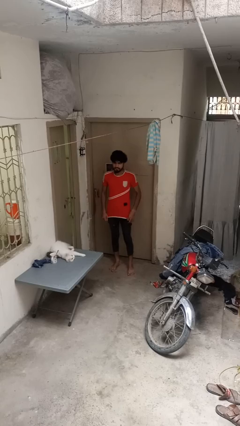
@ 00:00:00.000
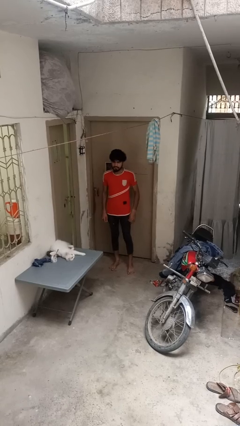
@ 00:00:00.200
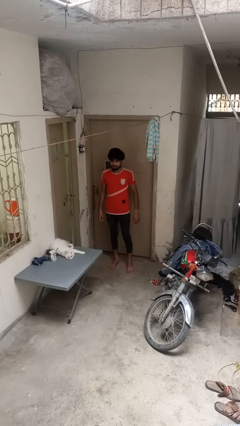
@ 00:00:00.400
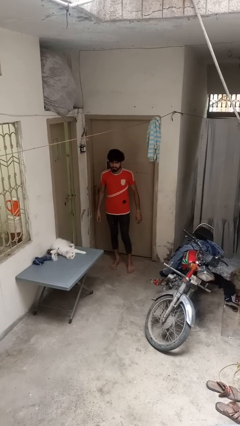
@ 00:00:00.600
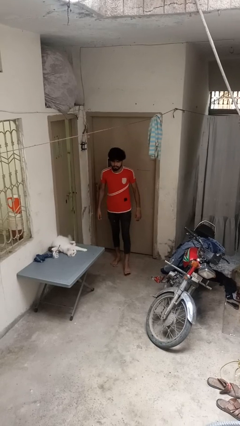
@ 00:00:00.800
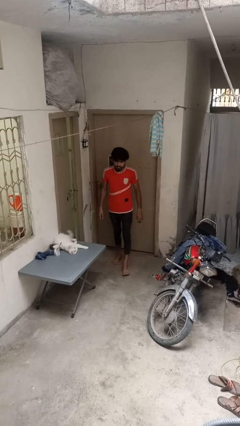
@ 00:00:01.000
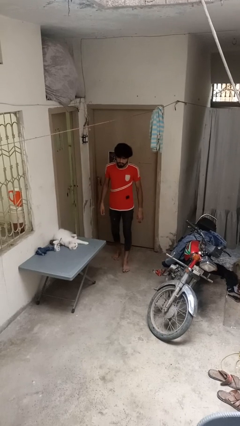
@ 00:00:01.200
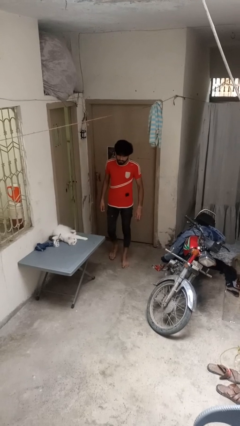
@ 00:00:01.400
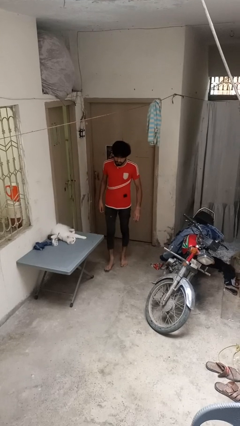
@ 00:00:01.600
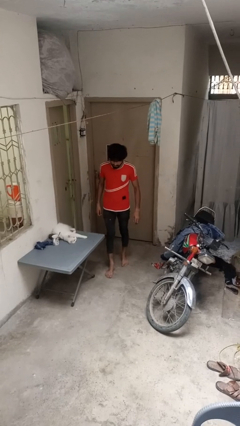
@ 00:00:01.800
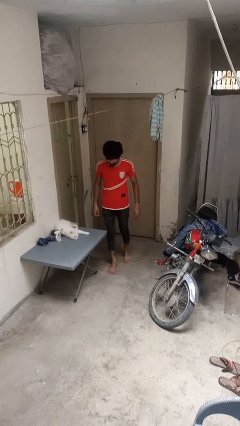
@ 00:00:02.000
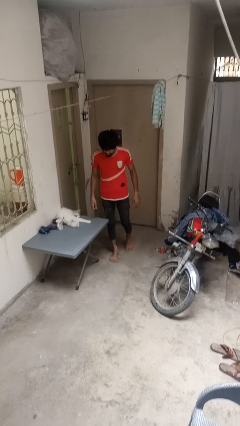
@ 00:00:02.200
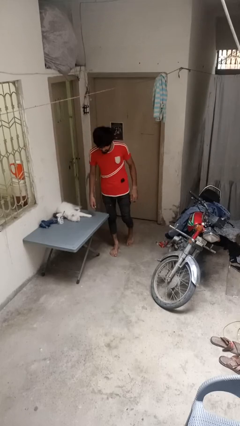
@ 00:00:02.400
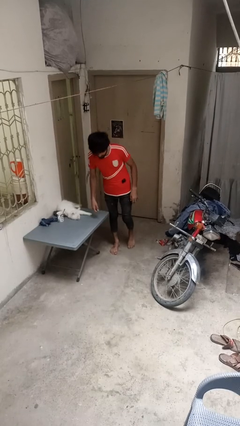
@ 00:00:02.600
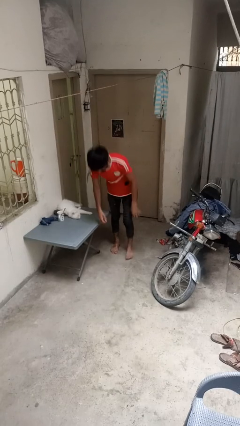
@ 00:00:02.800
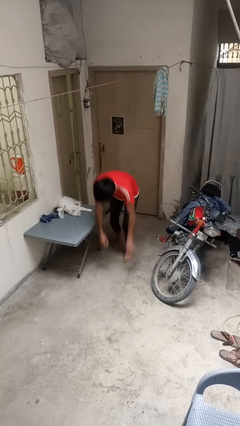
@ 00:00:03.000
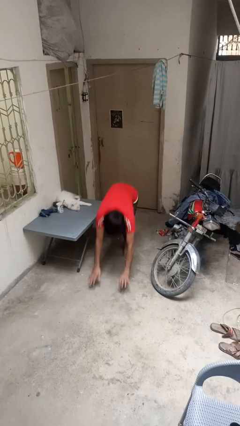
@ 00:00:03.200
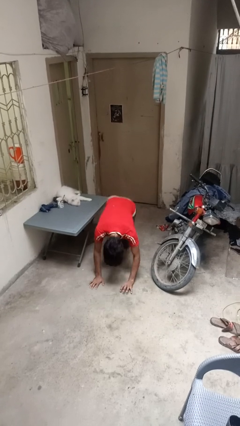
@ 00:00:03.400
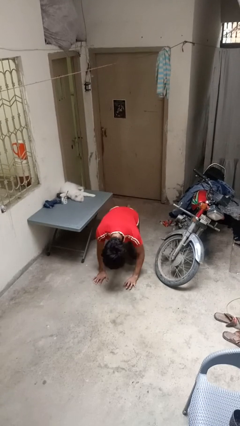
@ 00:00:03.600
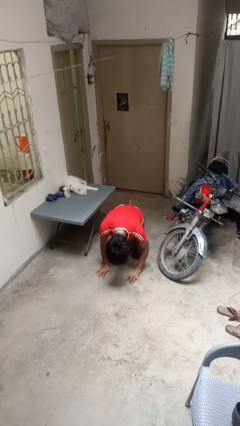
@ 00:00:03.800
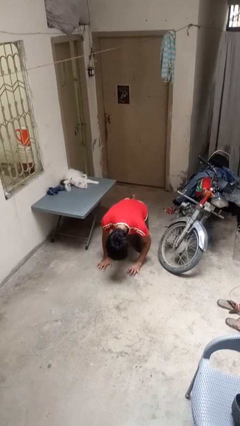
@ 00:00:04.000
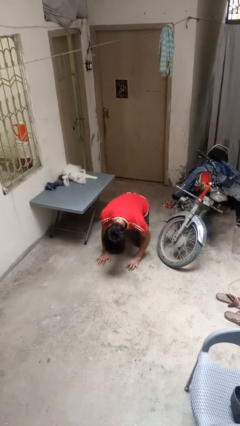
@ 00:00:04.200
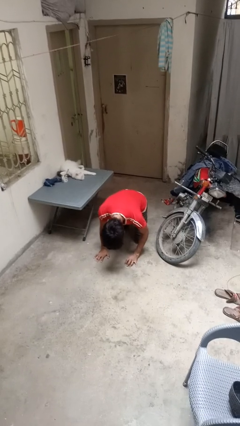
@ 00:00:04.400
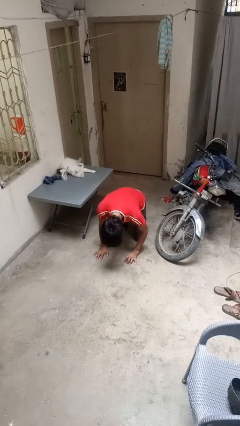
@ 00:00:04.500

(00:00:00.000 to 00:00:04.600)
person trips on object on floor

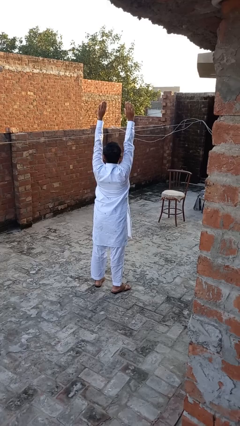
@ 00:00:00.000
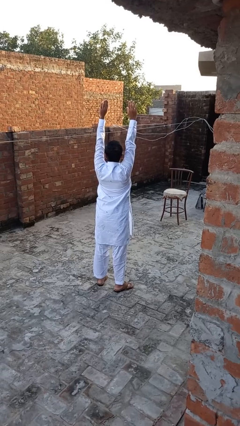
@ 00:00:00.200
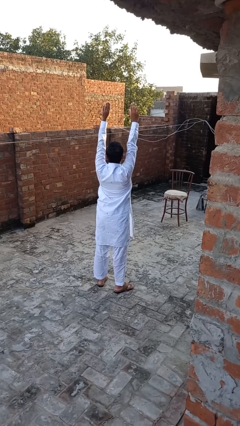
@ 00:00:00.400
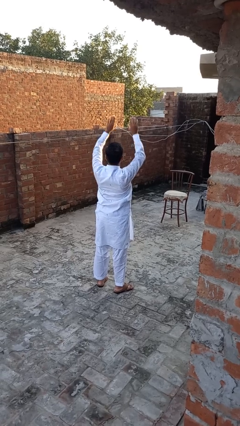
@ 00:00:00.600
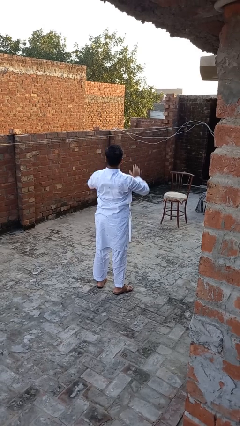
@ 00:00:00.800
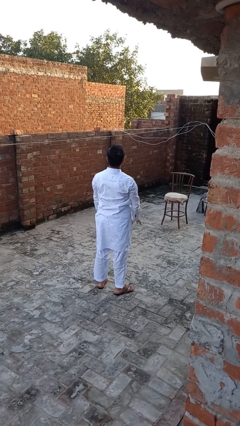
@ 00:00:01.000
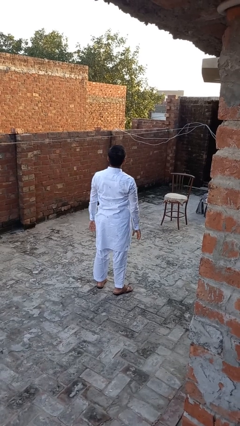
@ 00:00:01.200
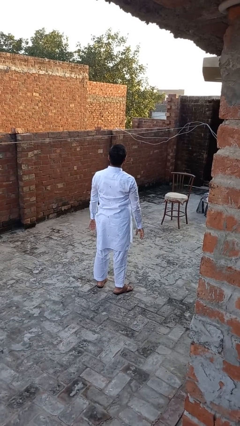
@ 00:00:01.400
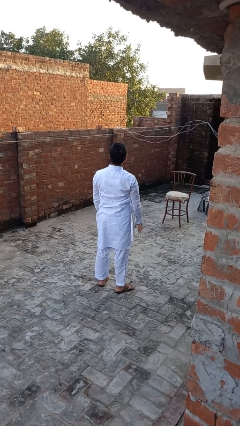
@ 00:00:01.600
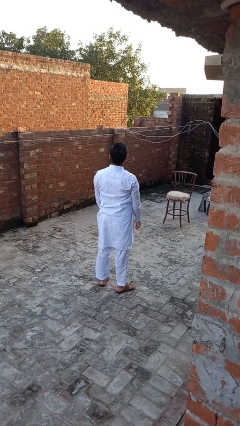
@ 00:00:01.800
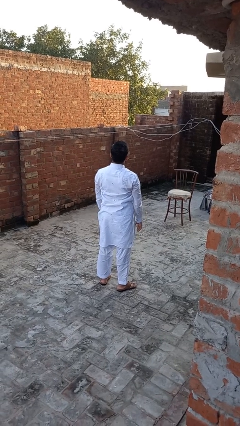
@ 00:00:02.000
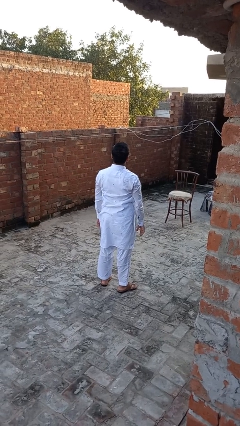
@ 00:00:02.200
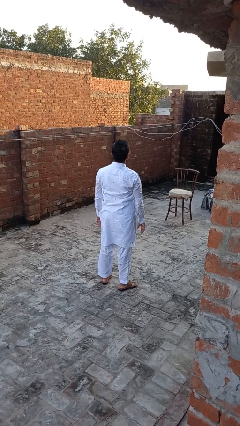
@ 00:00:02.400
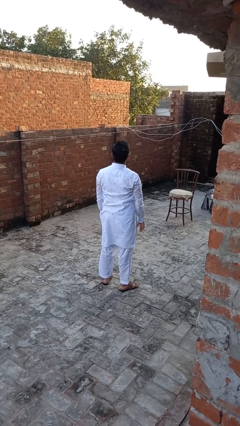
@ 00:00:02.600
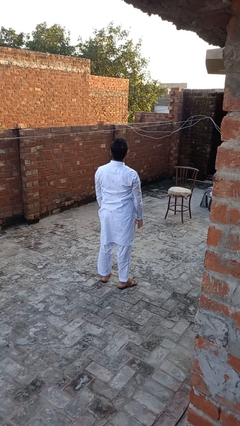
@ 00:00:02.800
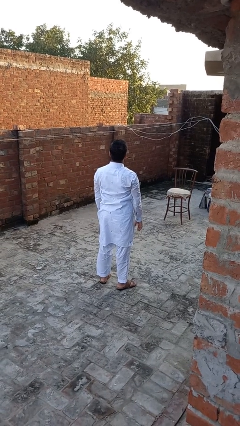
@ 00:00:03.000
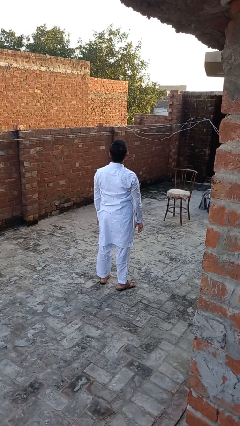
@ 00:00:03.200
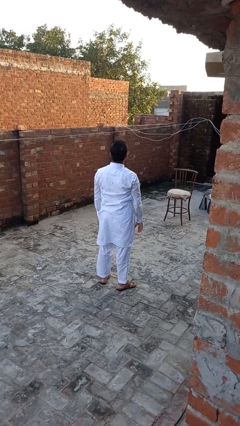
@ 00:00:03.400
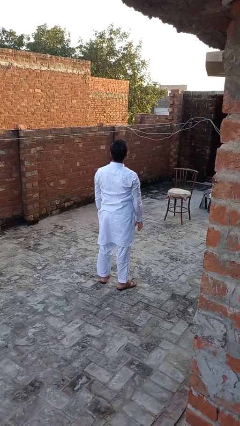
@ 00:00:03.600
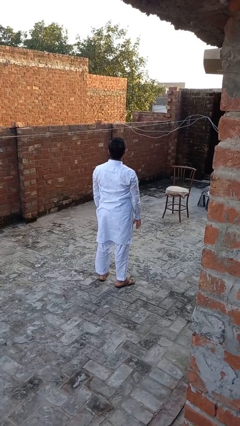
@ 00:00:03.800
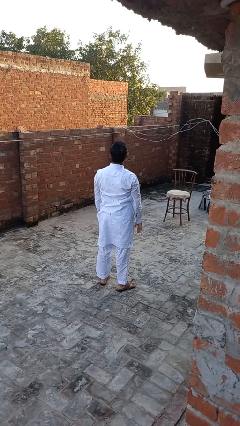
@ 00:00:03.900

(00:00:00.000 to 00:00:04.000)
person gestures swipe down

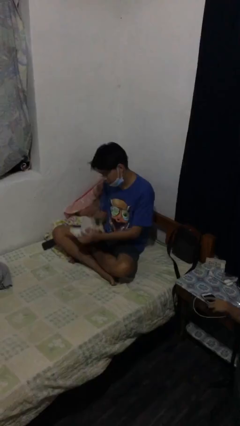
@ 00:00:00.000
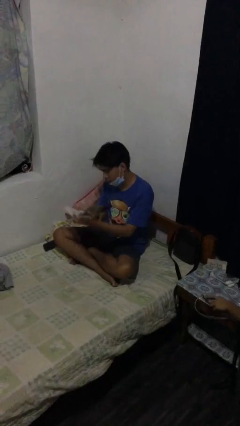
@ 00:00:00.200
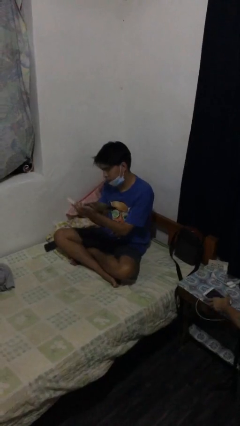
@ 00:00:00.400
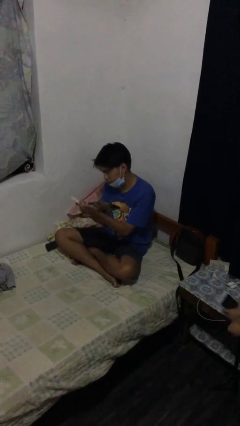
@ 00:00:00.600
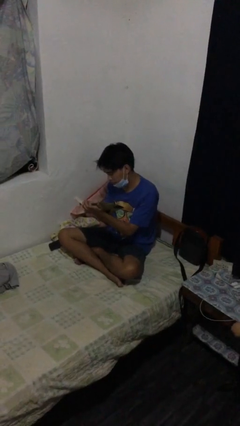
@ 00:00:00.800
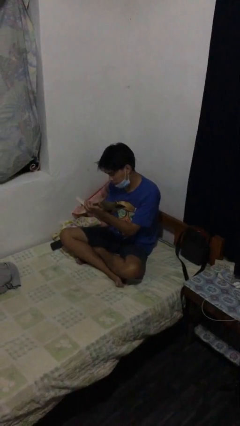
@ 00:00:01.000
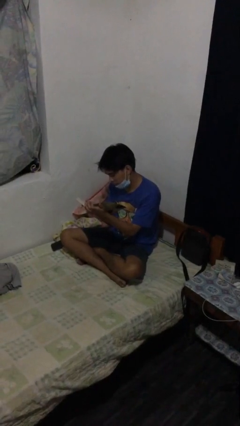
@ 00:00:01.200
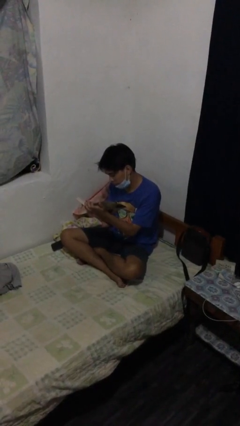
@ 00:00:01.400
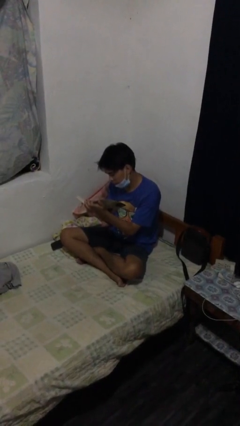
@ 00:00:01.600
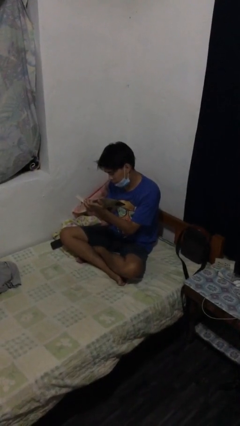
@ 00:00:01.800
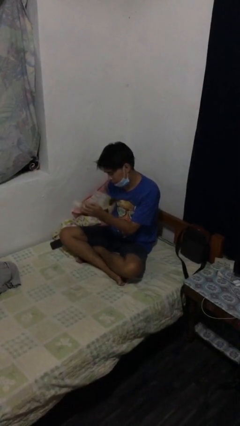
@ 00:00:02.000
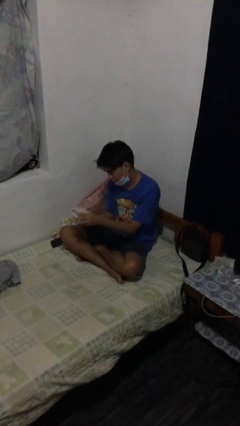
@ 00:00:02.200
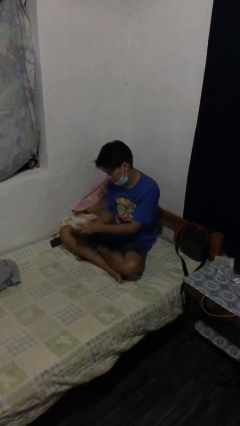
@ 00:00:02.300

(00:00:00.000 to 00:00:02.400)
person reads document

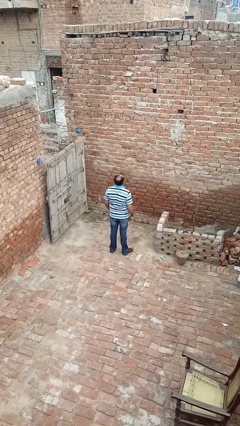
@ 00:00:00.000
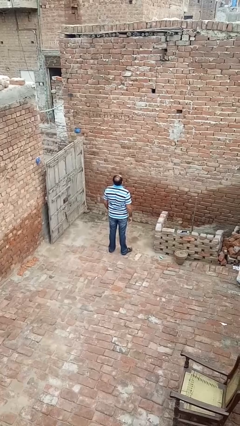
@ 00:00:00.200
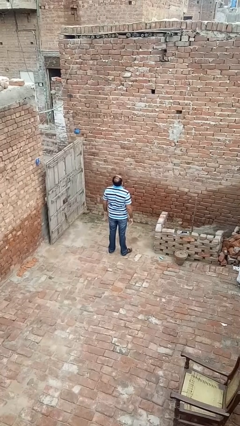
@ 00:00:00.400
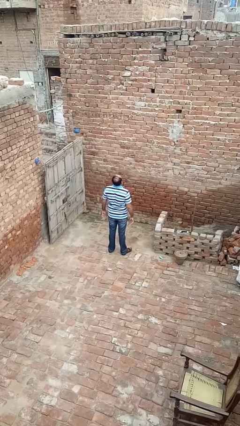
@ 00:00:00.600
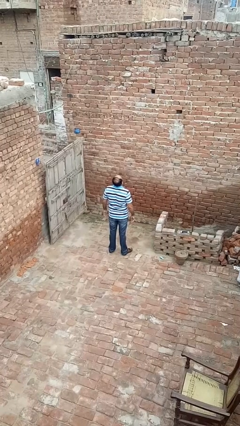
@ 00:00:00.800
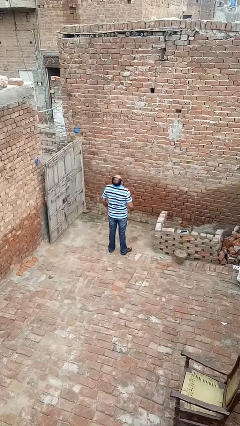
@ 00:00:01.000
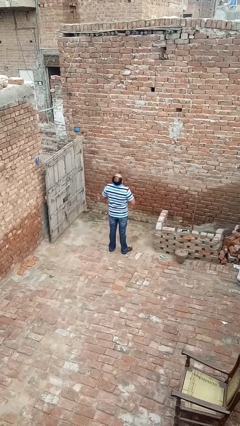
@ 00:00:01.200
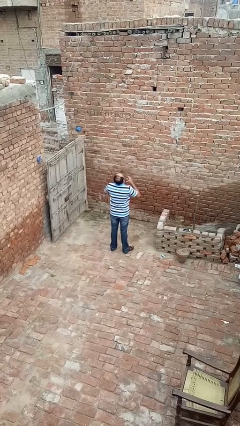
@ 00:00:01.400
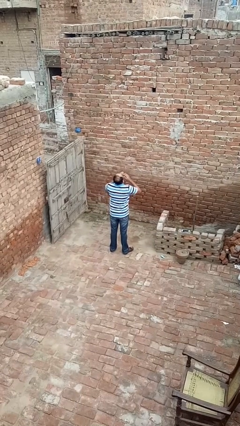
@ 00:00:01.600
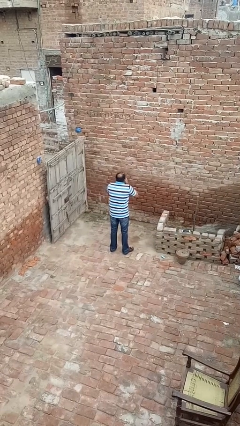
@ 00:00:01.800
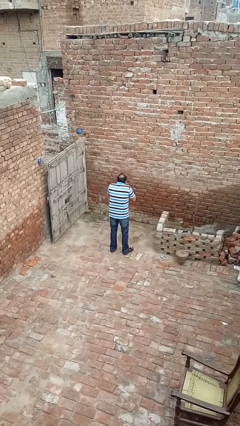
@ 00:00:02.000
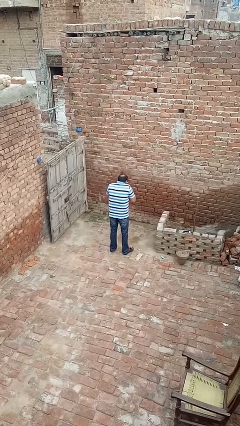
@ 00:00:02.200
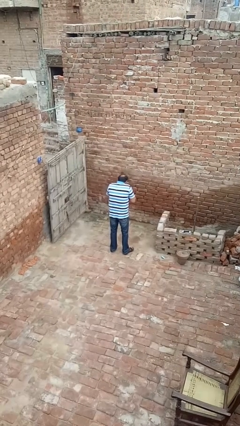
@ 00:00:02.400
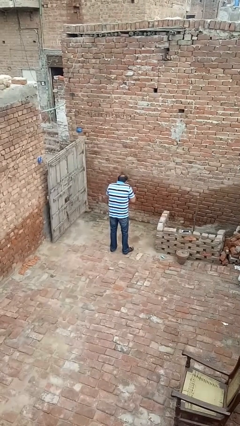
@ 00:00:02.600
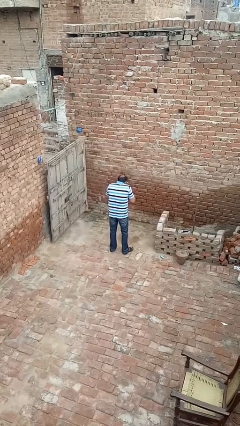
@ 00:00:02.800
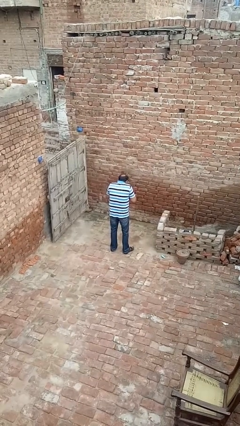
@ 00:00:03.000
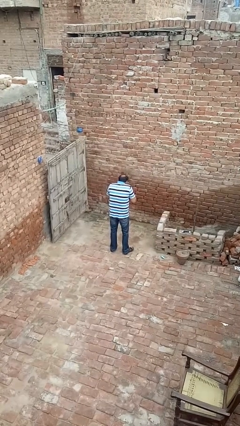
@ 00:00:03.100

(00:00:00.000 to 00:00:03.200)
person sneezes into hand

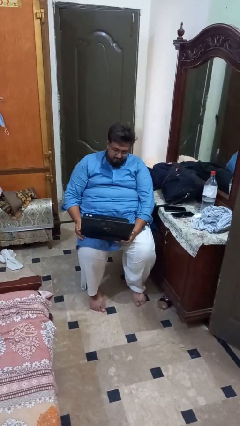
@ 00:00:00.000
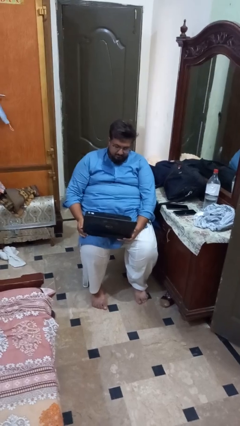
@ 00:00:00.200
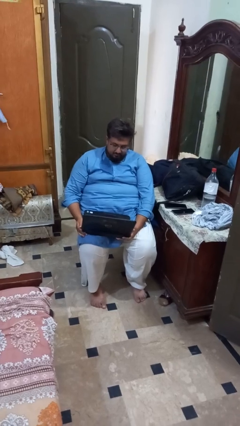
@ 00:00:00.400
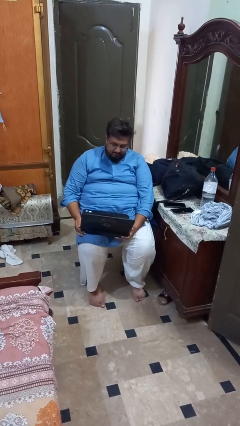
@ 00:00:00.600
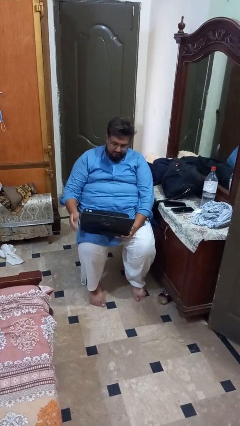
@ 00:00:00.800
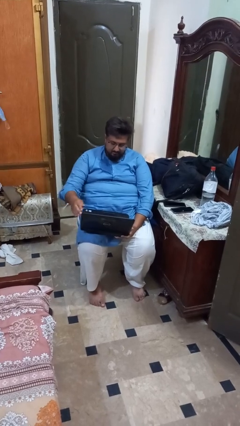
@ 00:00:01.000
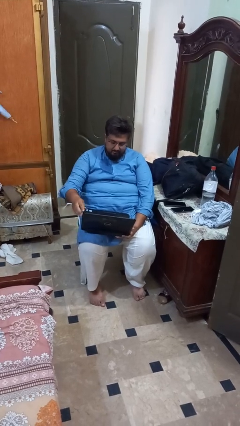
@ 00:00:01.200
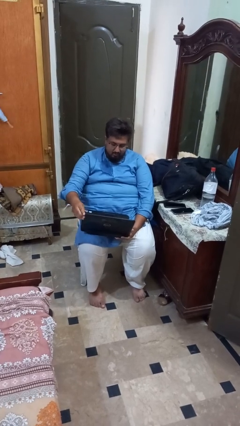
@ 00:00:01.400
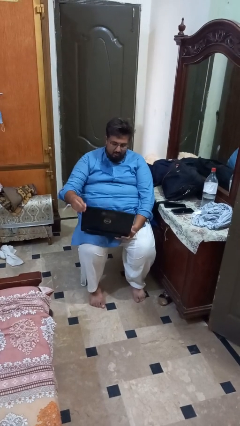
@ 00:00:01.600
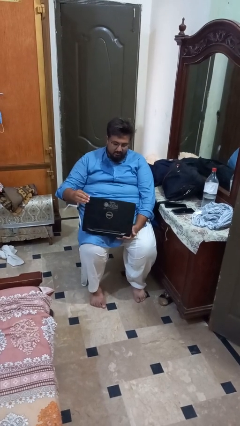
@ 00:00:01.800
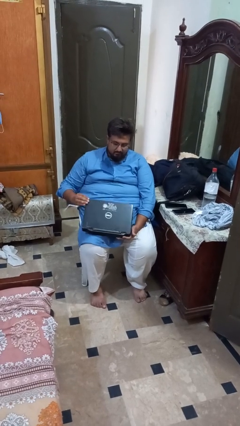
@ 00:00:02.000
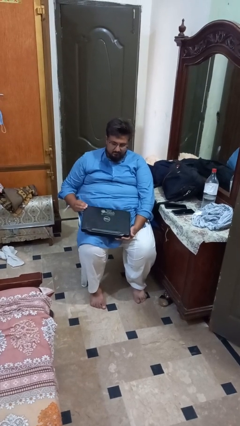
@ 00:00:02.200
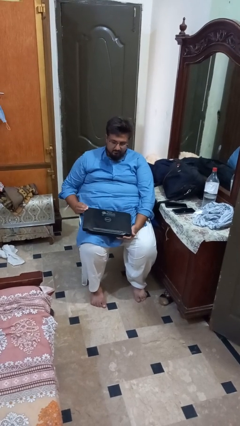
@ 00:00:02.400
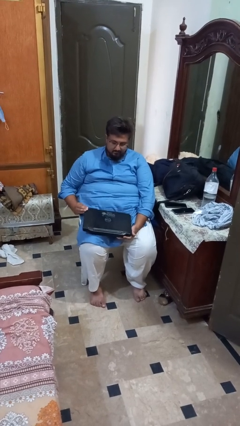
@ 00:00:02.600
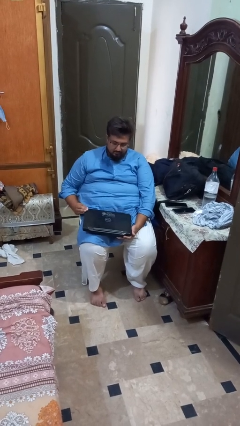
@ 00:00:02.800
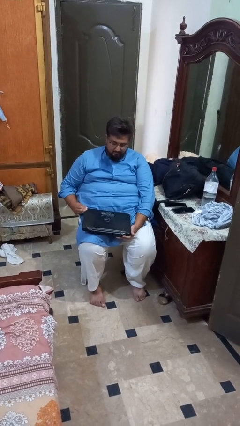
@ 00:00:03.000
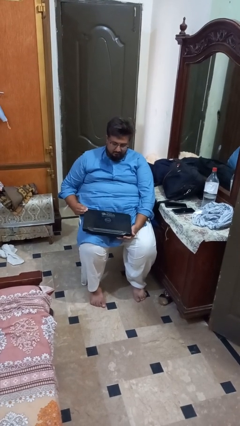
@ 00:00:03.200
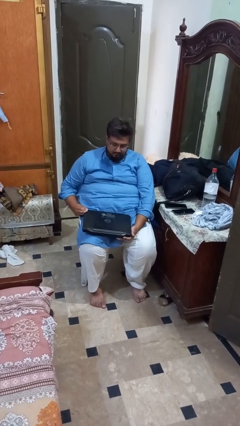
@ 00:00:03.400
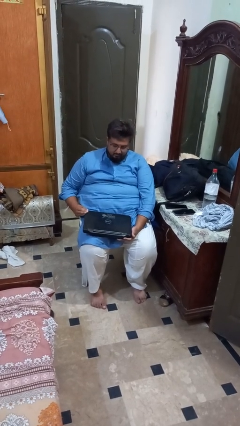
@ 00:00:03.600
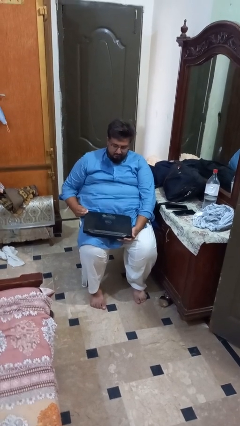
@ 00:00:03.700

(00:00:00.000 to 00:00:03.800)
person closes laptop
